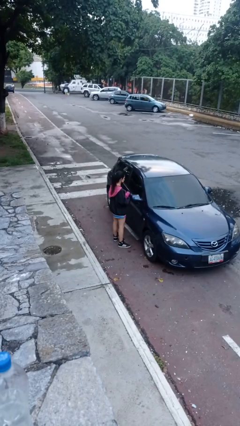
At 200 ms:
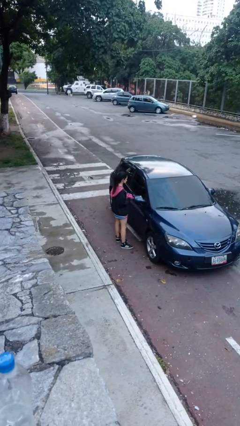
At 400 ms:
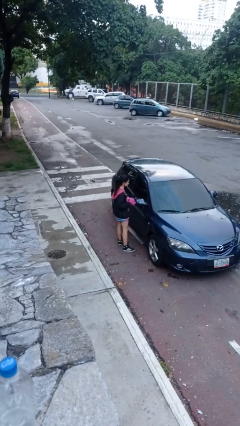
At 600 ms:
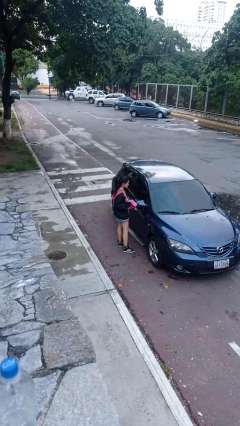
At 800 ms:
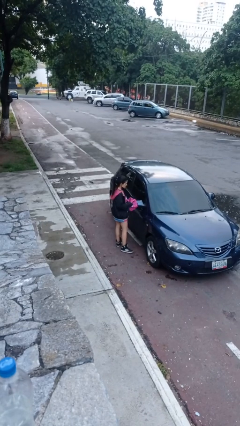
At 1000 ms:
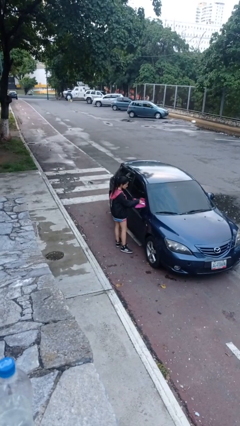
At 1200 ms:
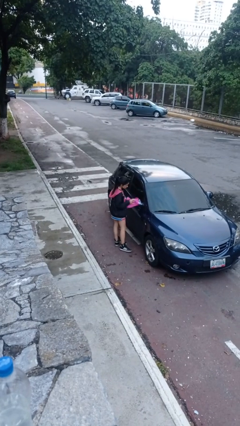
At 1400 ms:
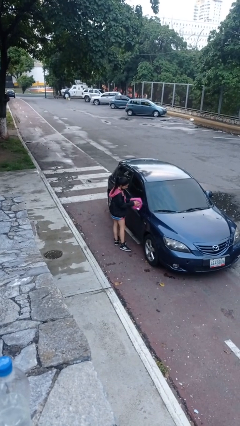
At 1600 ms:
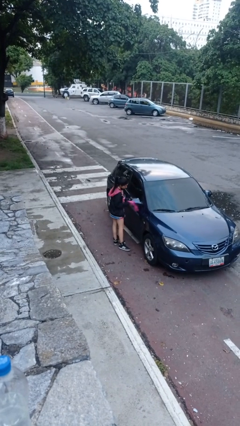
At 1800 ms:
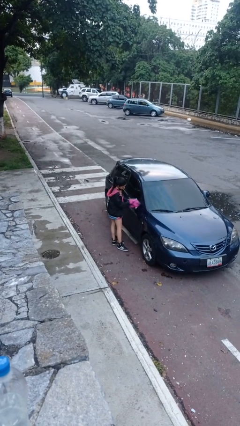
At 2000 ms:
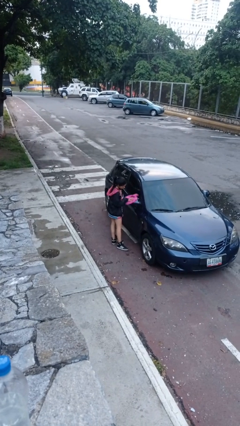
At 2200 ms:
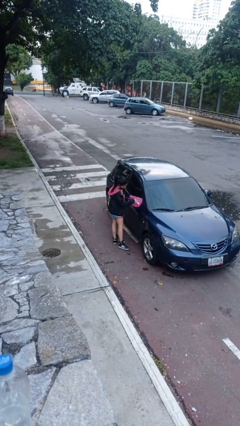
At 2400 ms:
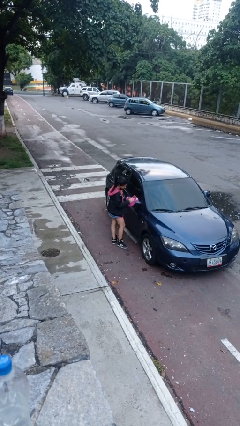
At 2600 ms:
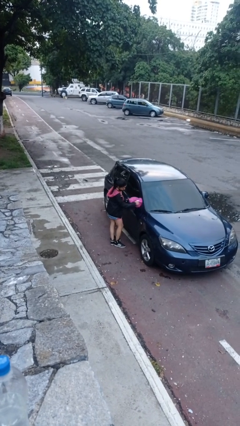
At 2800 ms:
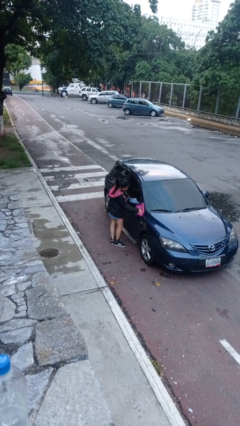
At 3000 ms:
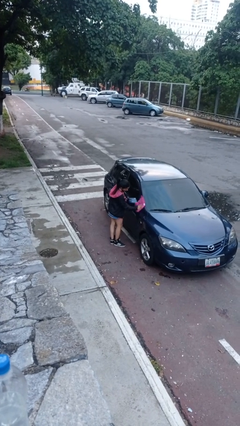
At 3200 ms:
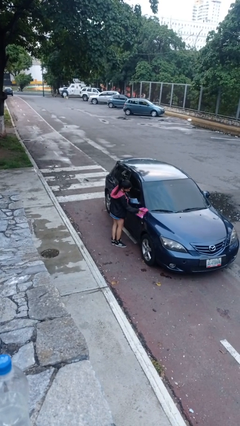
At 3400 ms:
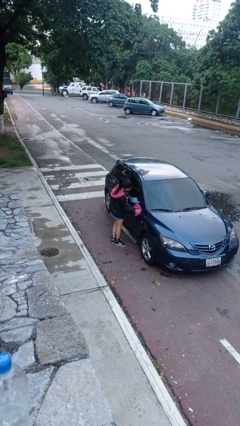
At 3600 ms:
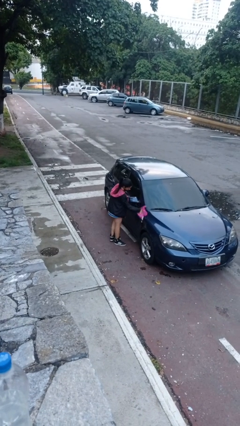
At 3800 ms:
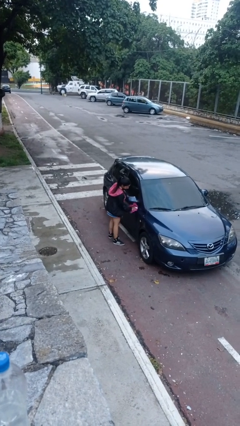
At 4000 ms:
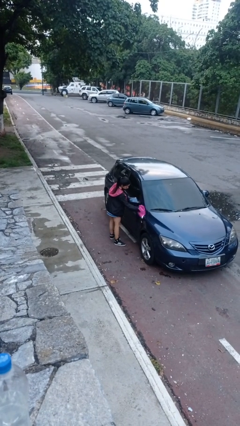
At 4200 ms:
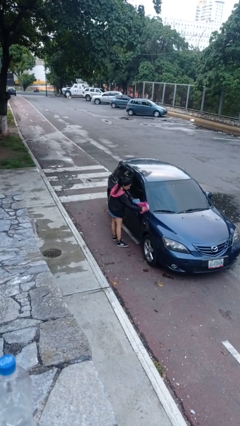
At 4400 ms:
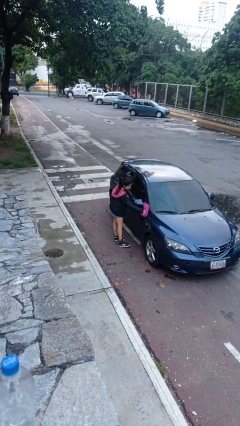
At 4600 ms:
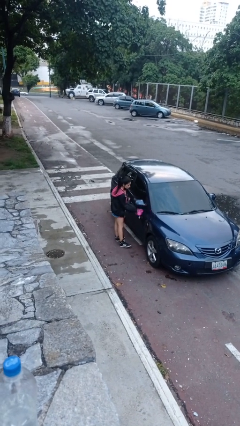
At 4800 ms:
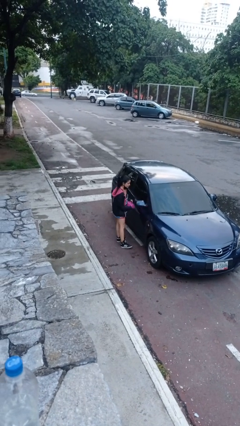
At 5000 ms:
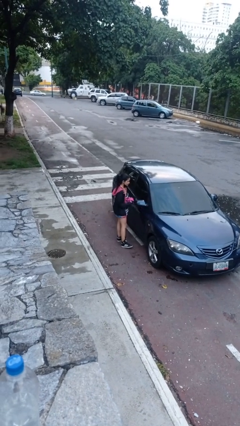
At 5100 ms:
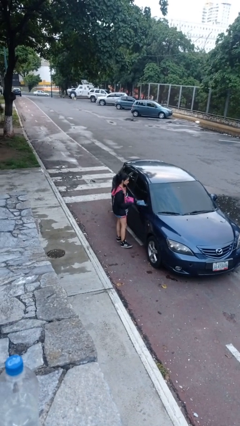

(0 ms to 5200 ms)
person polishes car with rag

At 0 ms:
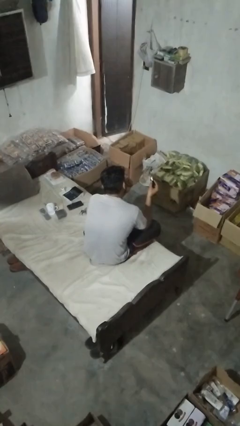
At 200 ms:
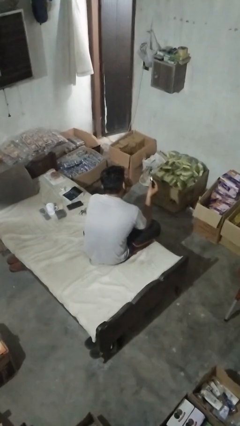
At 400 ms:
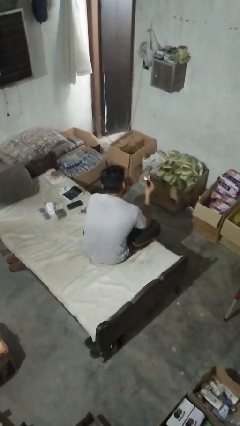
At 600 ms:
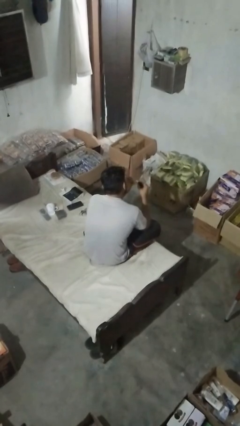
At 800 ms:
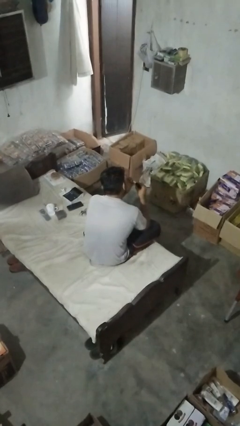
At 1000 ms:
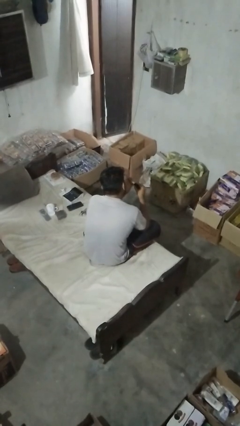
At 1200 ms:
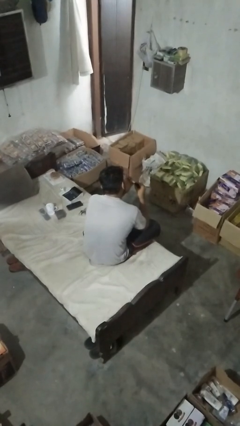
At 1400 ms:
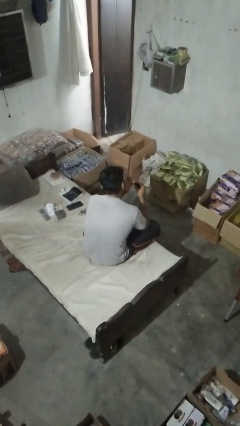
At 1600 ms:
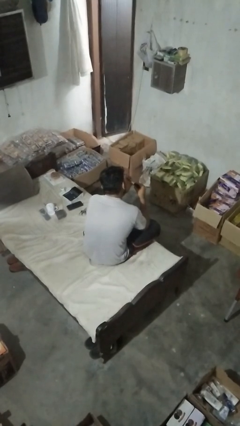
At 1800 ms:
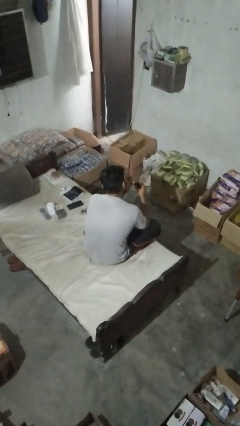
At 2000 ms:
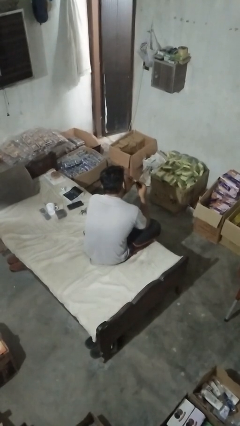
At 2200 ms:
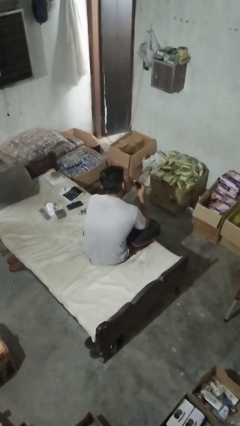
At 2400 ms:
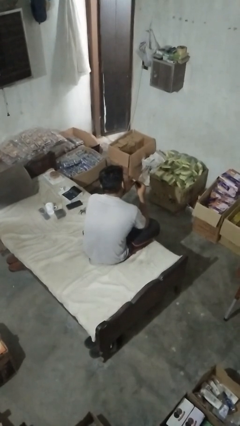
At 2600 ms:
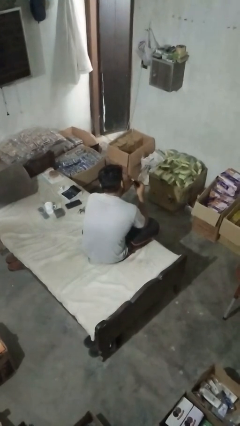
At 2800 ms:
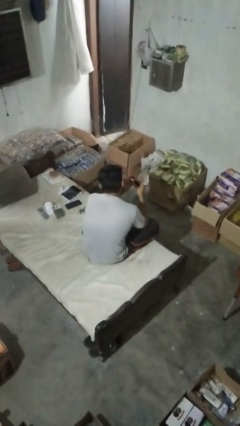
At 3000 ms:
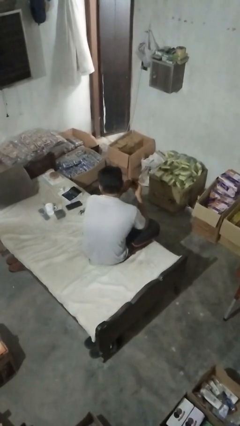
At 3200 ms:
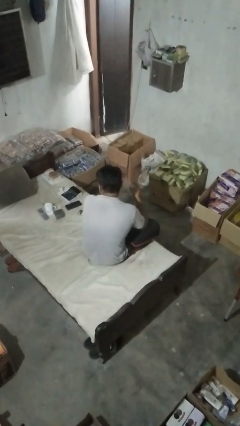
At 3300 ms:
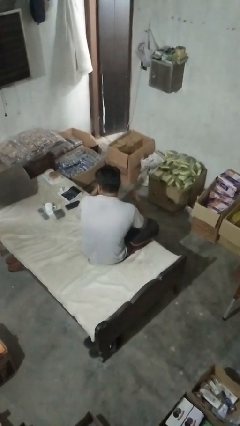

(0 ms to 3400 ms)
person paints fingernails

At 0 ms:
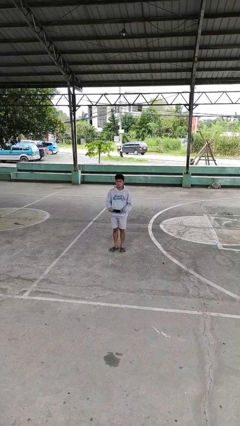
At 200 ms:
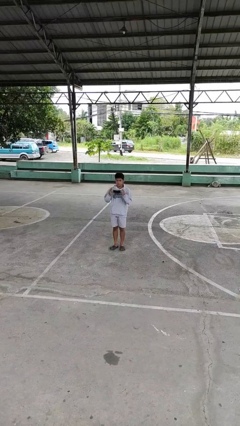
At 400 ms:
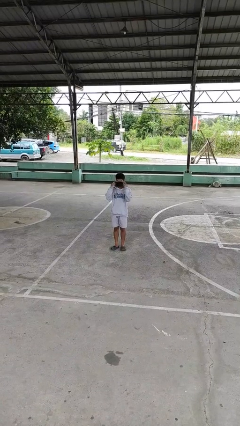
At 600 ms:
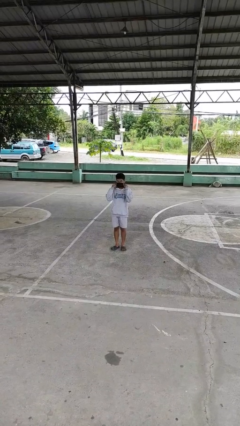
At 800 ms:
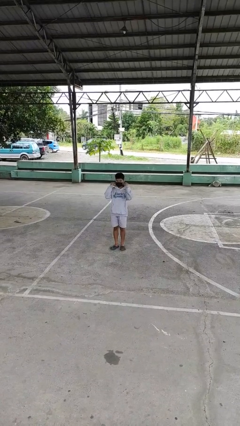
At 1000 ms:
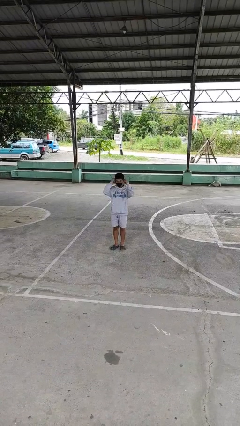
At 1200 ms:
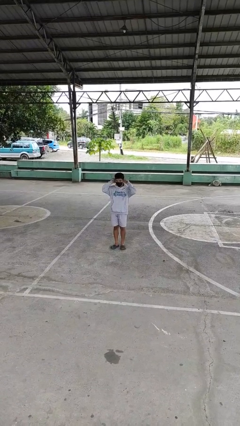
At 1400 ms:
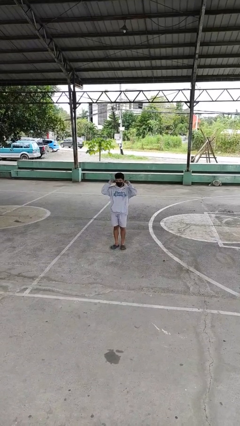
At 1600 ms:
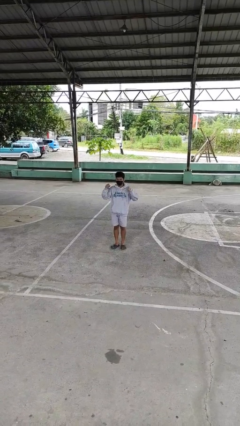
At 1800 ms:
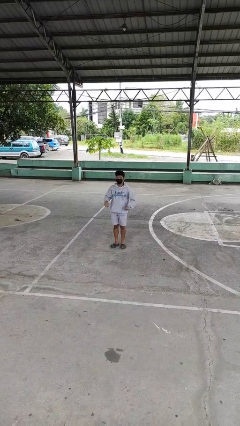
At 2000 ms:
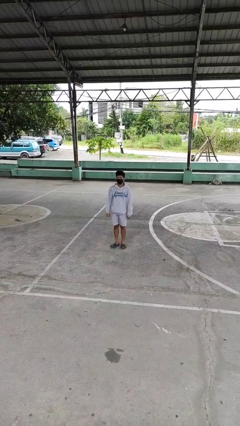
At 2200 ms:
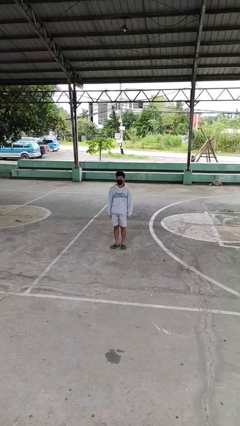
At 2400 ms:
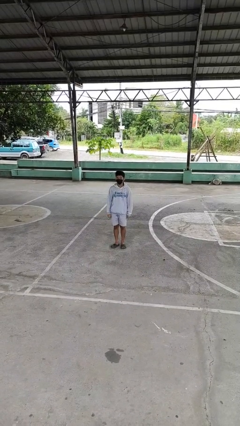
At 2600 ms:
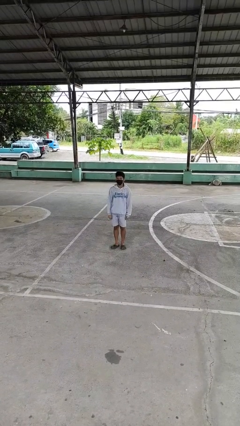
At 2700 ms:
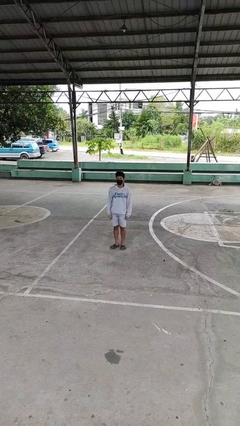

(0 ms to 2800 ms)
person puts on facemask

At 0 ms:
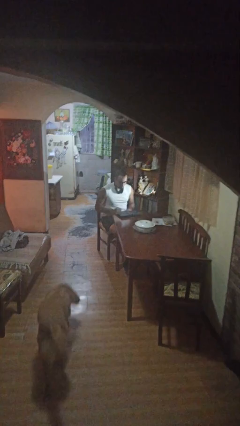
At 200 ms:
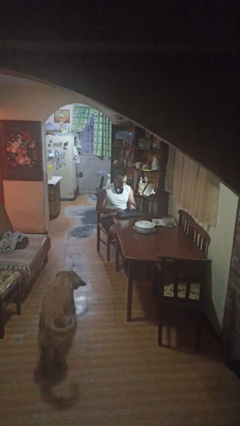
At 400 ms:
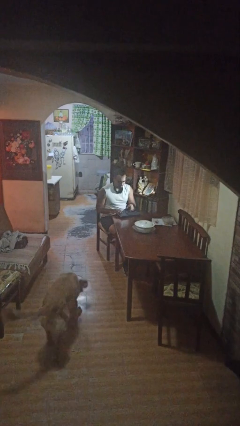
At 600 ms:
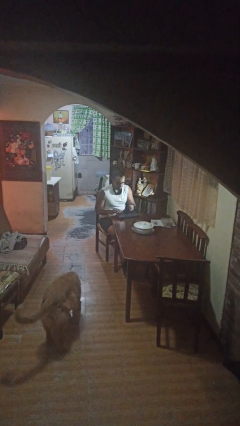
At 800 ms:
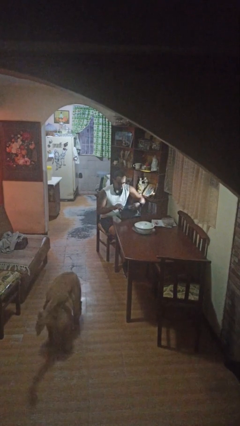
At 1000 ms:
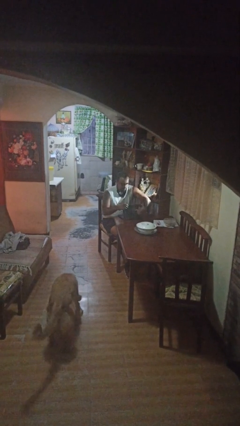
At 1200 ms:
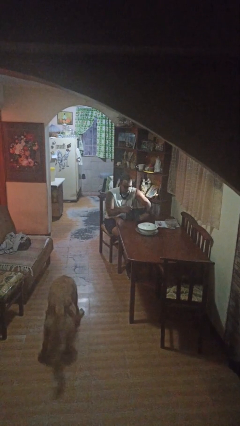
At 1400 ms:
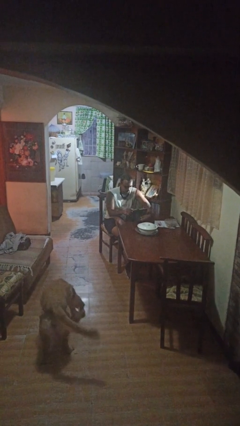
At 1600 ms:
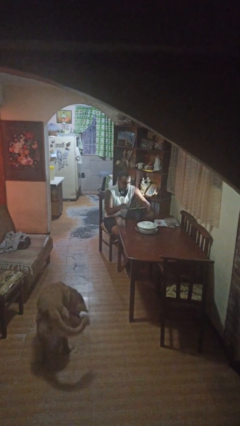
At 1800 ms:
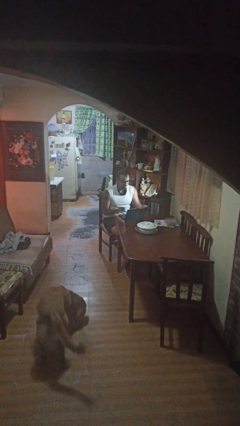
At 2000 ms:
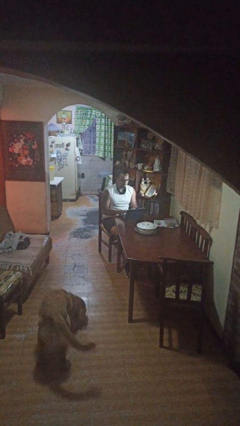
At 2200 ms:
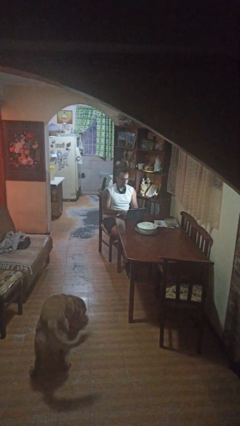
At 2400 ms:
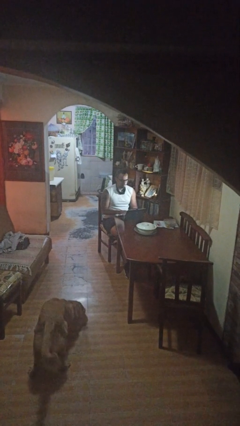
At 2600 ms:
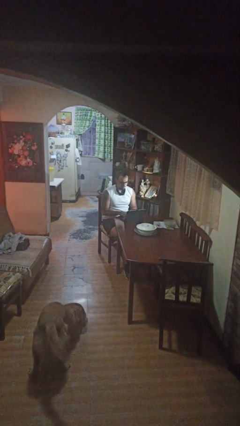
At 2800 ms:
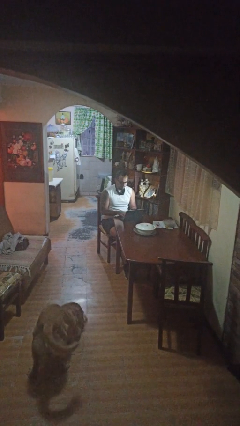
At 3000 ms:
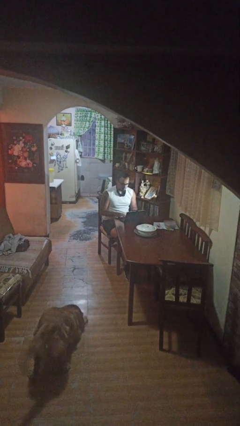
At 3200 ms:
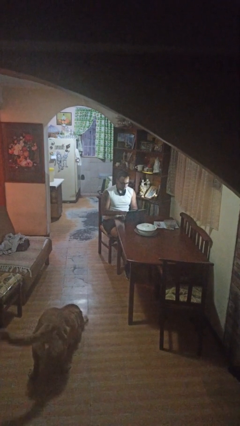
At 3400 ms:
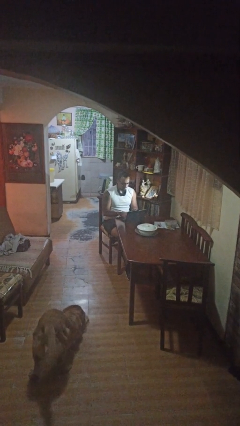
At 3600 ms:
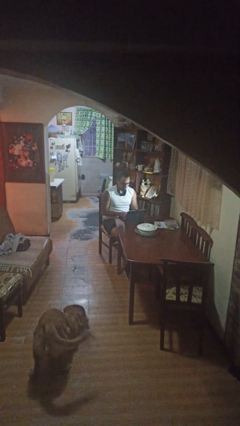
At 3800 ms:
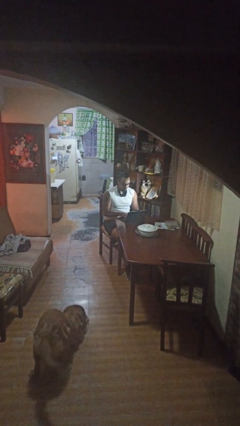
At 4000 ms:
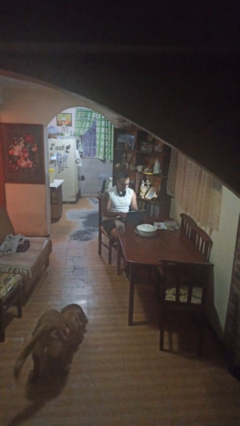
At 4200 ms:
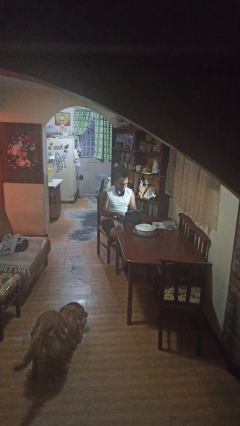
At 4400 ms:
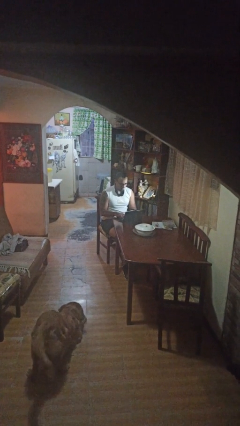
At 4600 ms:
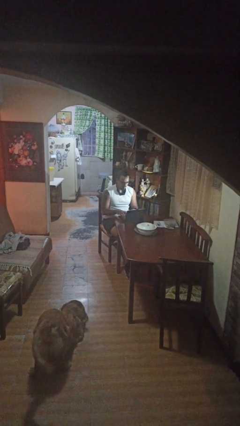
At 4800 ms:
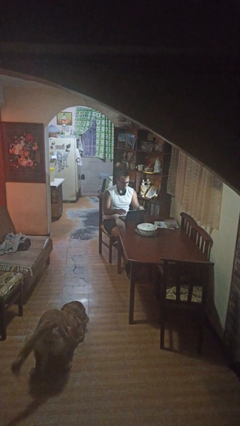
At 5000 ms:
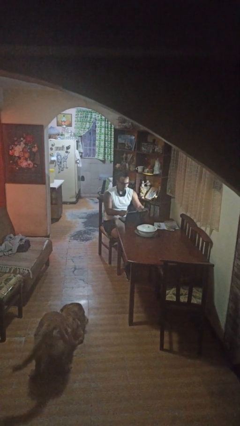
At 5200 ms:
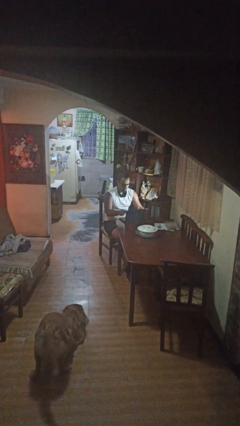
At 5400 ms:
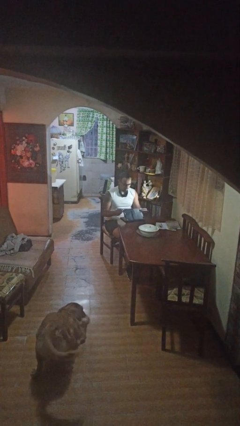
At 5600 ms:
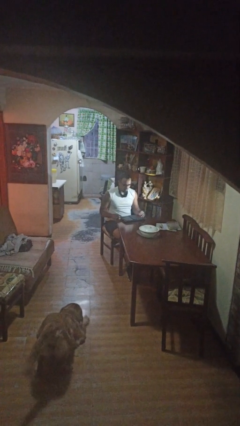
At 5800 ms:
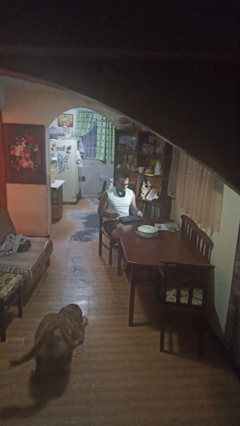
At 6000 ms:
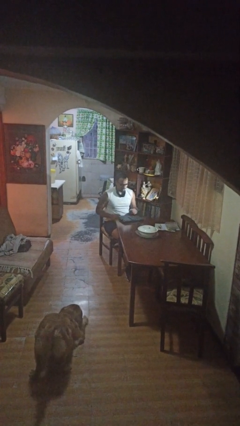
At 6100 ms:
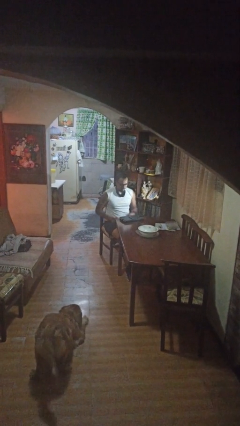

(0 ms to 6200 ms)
person interacts with laptop
